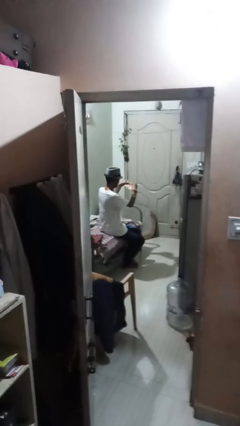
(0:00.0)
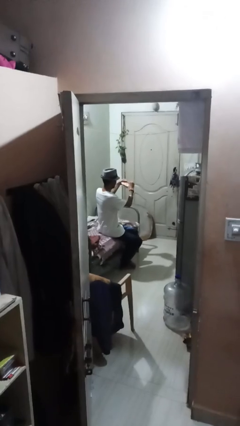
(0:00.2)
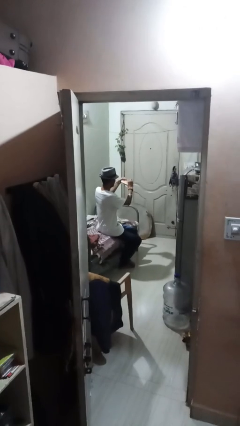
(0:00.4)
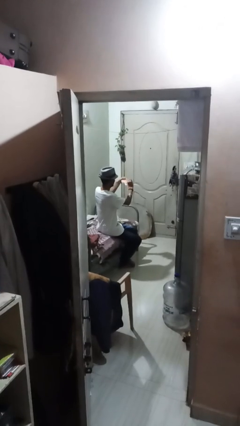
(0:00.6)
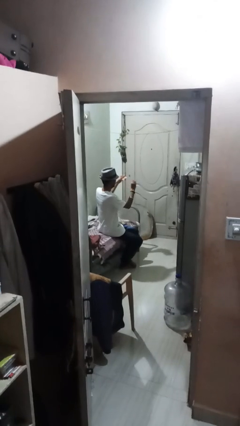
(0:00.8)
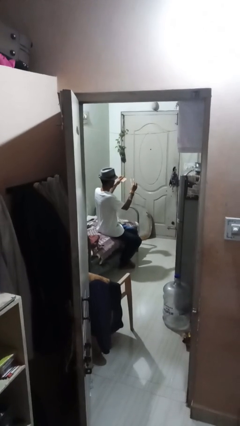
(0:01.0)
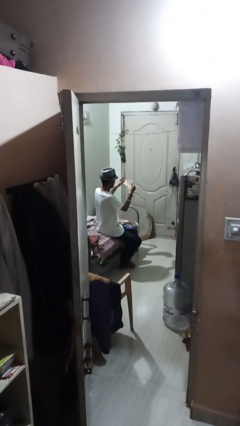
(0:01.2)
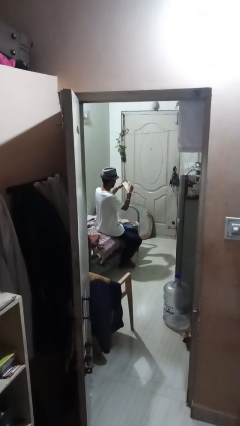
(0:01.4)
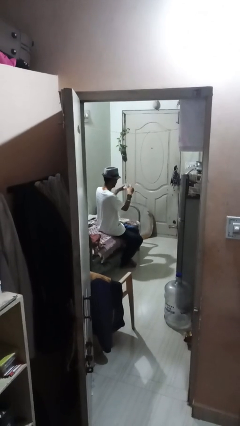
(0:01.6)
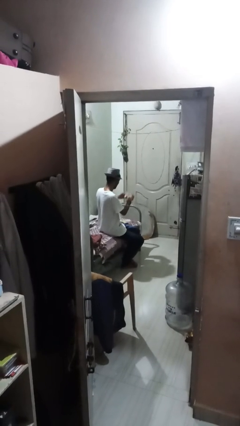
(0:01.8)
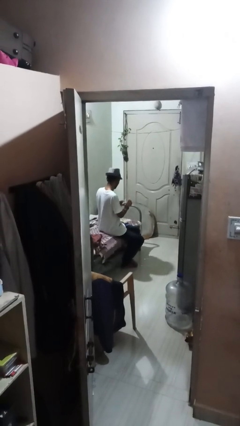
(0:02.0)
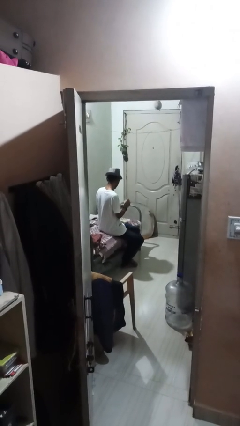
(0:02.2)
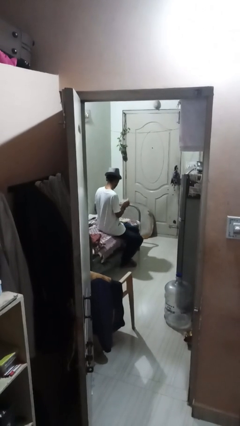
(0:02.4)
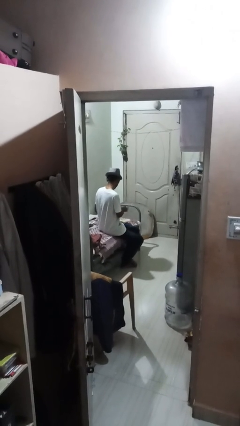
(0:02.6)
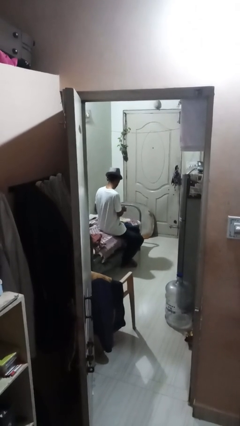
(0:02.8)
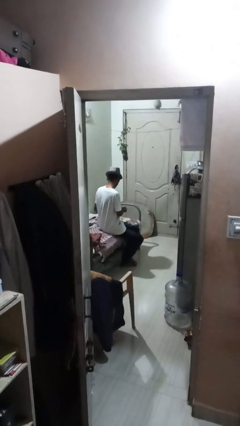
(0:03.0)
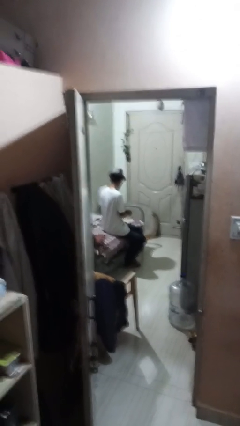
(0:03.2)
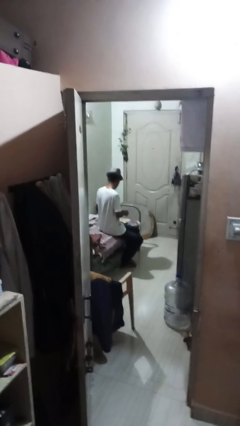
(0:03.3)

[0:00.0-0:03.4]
person tears paper

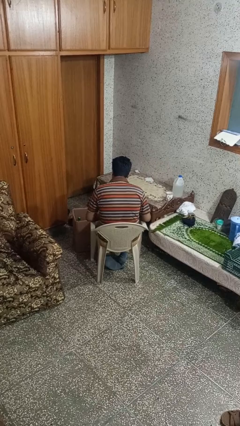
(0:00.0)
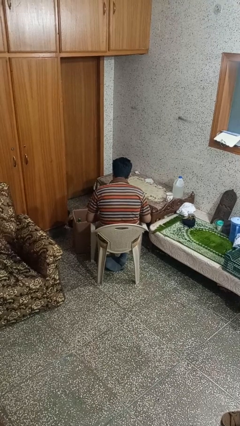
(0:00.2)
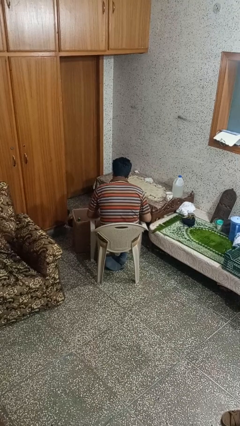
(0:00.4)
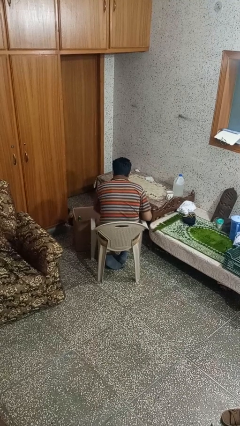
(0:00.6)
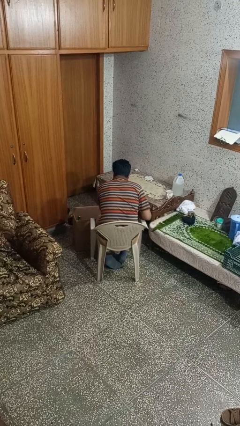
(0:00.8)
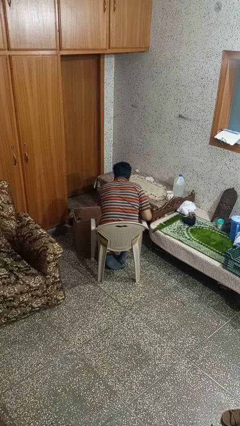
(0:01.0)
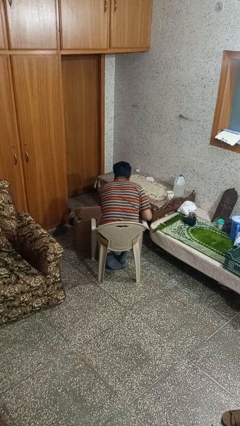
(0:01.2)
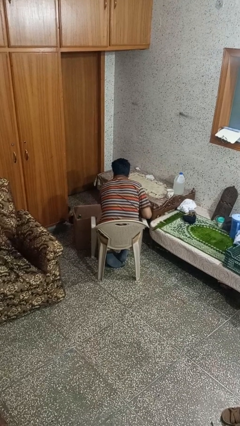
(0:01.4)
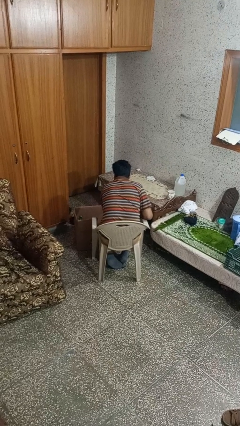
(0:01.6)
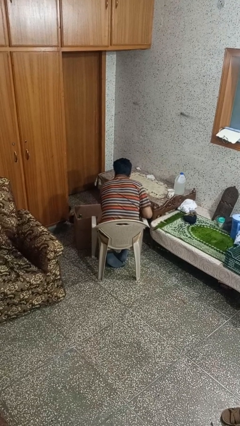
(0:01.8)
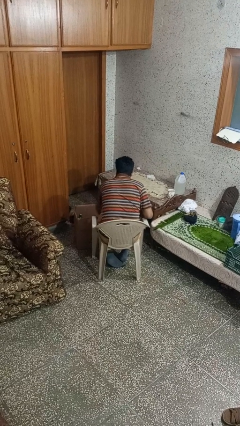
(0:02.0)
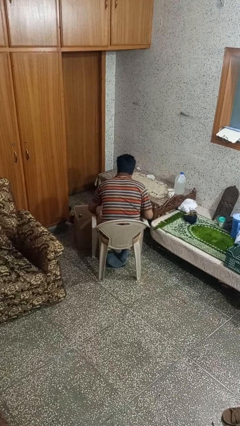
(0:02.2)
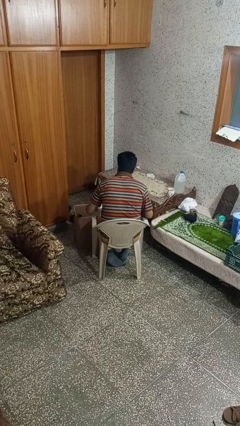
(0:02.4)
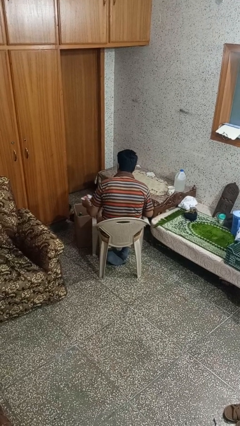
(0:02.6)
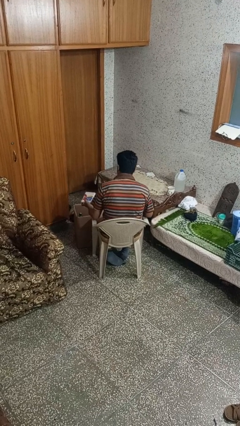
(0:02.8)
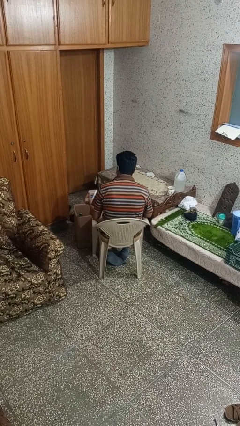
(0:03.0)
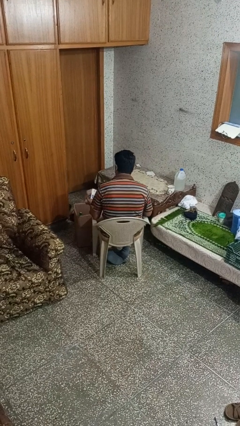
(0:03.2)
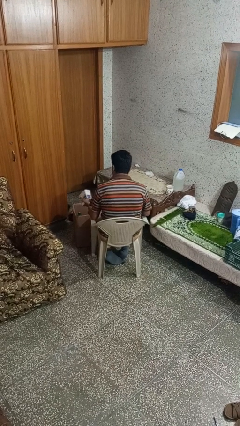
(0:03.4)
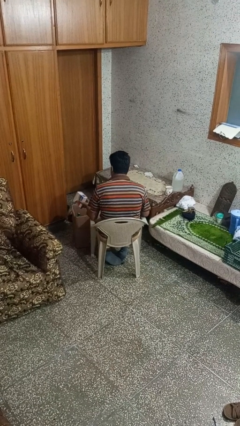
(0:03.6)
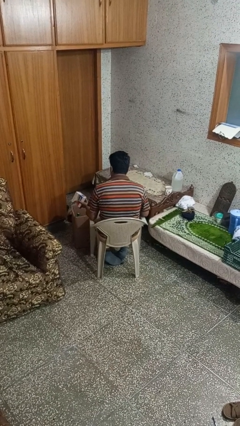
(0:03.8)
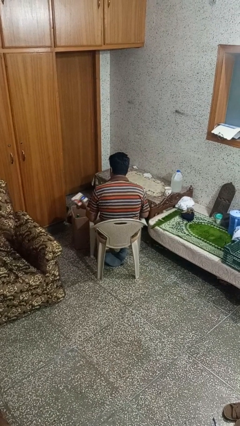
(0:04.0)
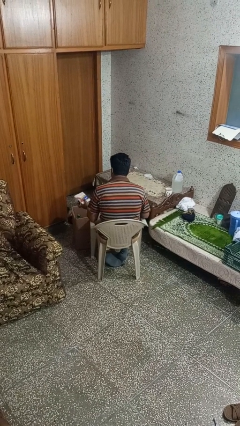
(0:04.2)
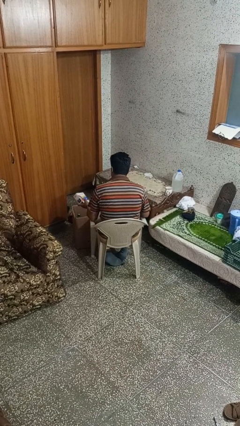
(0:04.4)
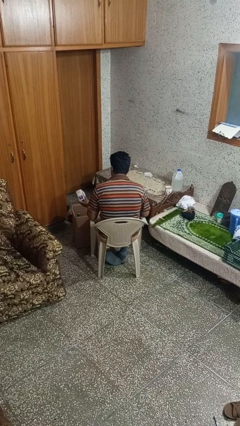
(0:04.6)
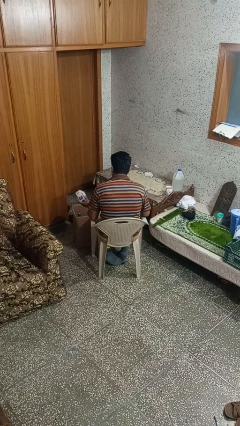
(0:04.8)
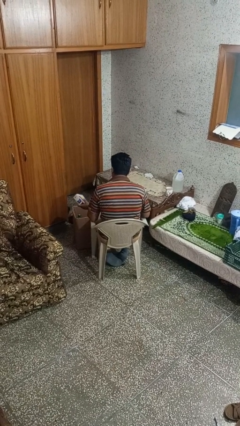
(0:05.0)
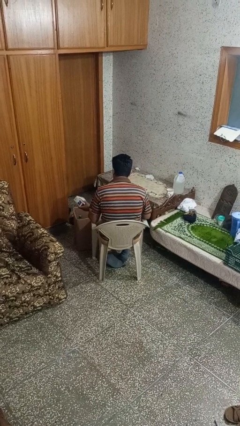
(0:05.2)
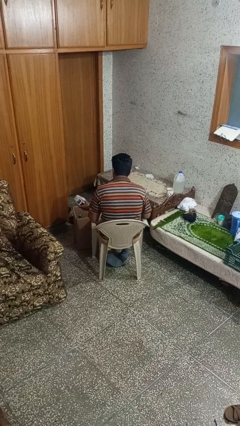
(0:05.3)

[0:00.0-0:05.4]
person takes object from box

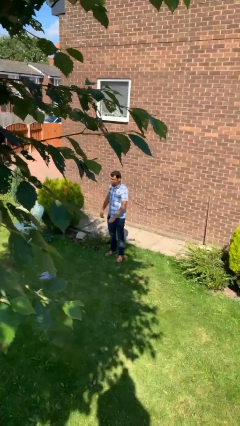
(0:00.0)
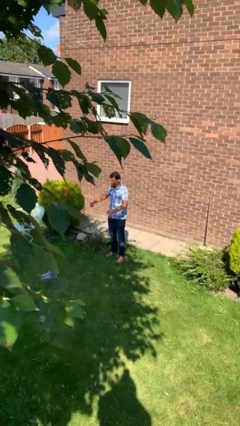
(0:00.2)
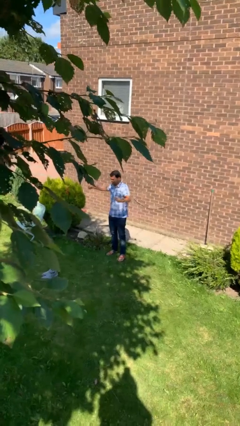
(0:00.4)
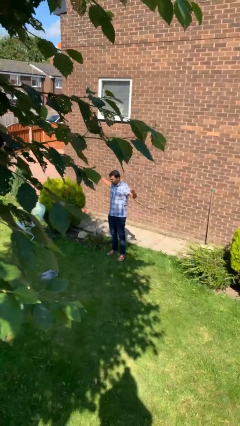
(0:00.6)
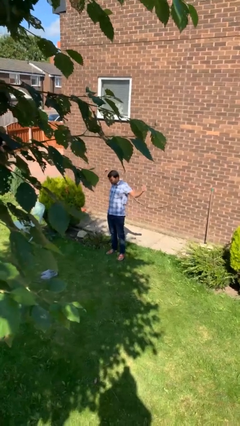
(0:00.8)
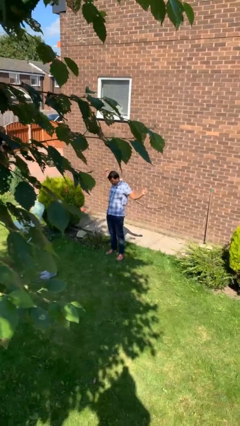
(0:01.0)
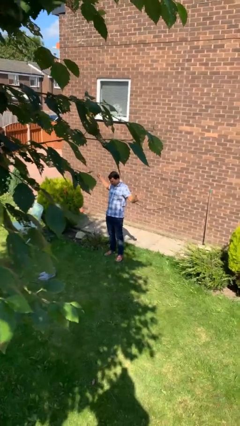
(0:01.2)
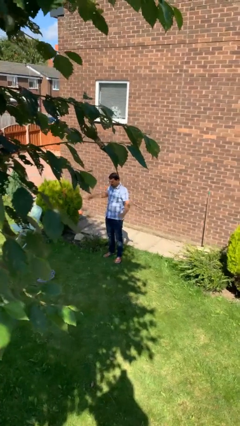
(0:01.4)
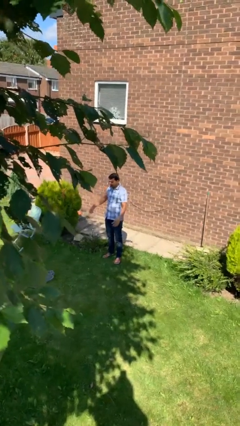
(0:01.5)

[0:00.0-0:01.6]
person stretches arms to side

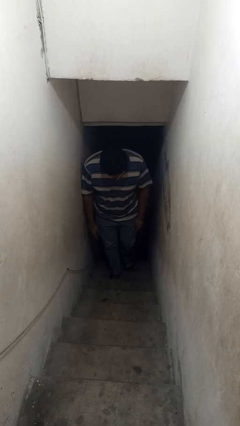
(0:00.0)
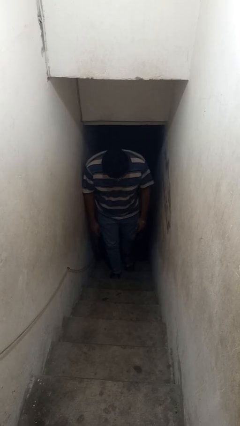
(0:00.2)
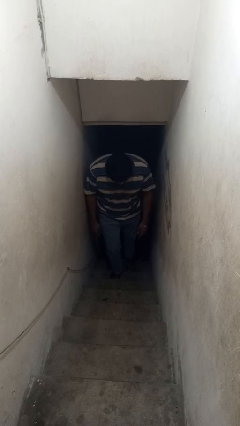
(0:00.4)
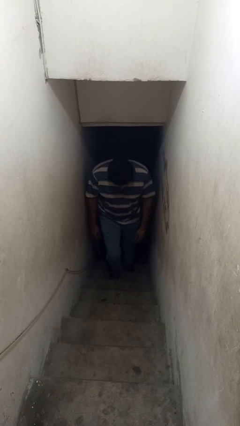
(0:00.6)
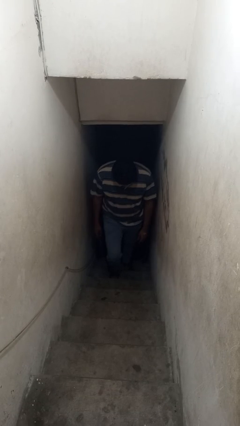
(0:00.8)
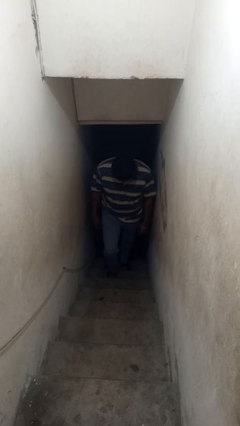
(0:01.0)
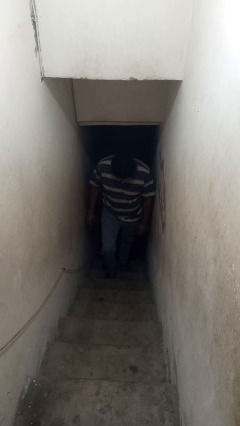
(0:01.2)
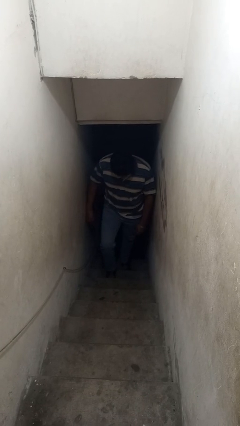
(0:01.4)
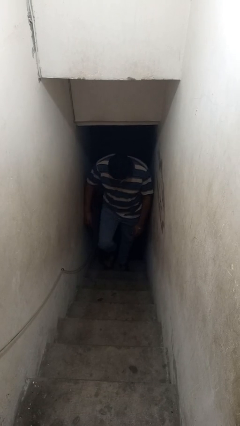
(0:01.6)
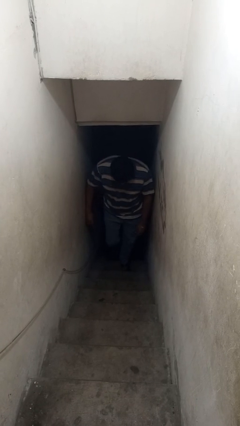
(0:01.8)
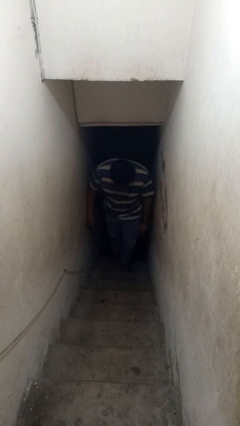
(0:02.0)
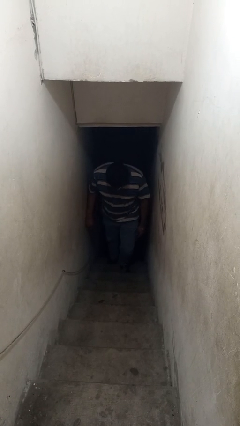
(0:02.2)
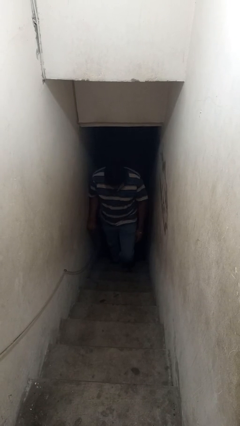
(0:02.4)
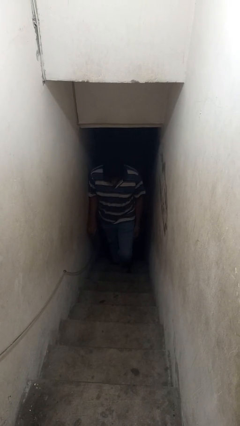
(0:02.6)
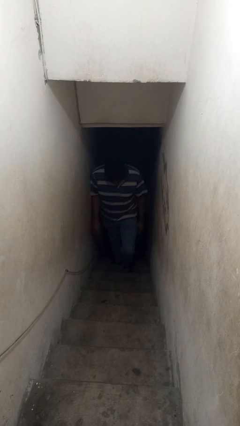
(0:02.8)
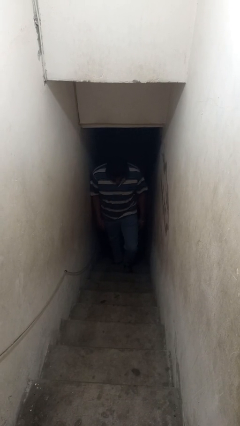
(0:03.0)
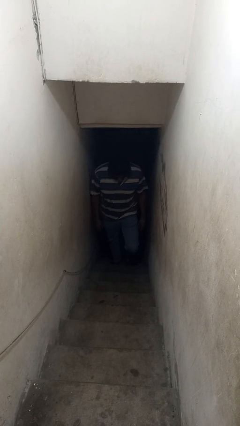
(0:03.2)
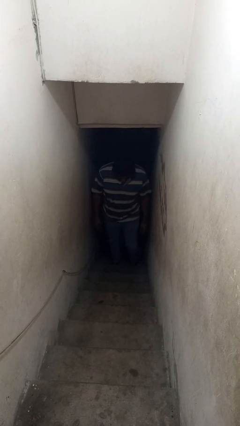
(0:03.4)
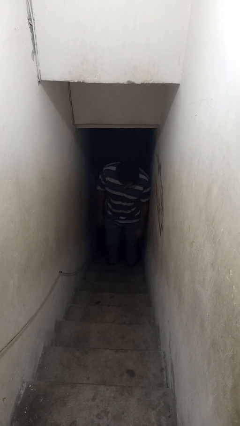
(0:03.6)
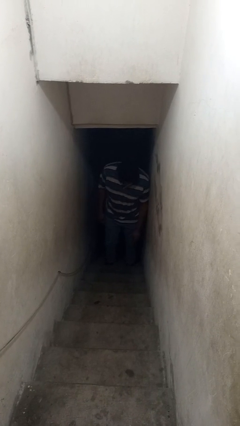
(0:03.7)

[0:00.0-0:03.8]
person climbs down stairs

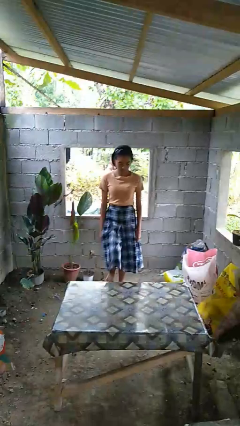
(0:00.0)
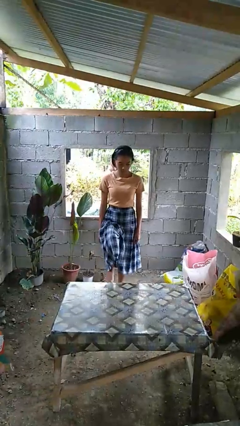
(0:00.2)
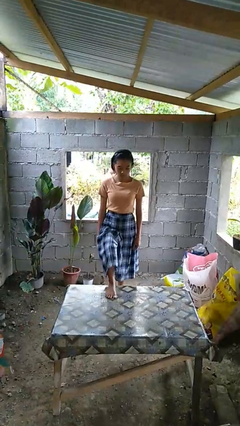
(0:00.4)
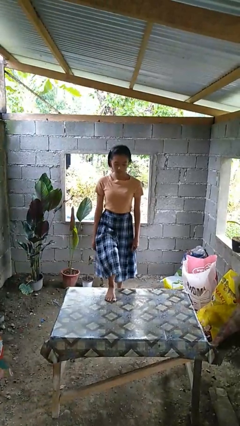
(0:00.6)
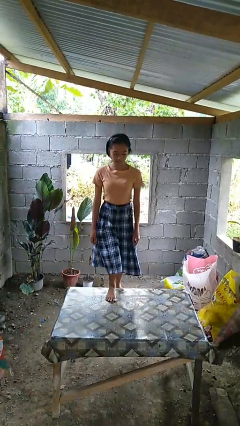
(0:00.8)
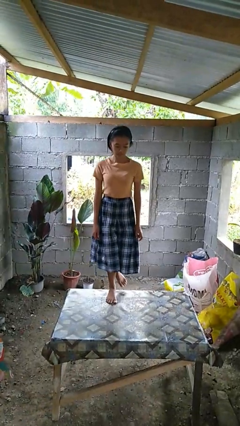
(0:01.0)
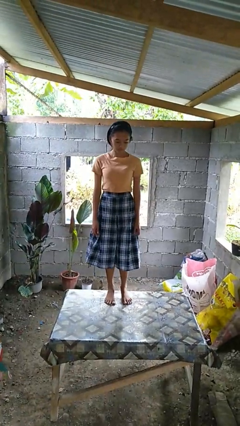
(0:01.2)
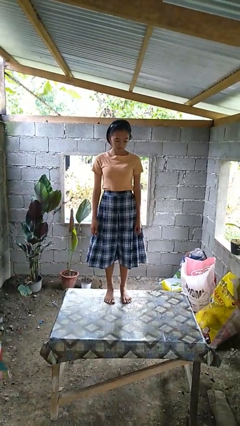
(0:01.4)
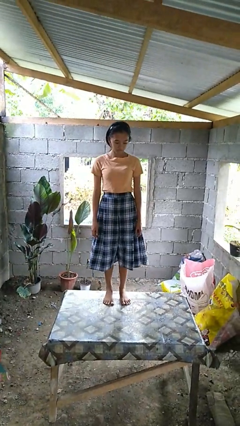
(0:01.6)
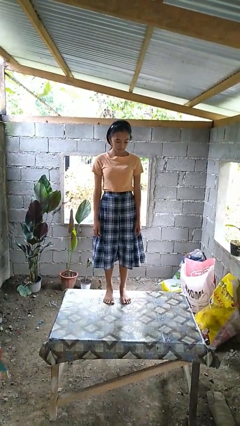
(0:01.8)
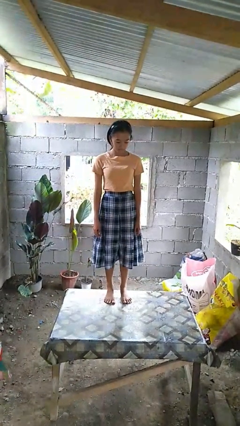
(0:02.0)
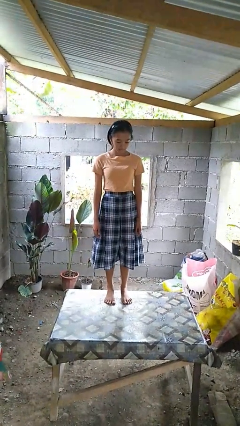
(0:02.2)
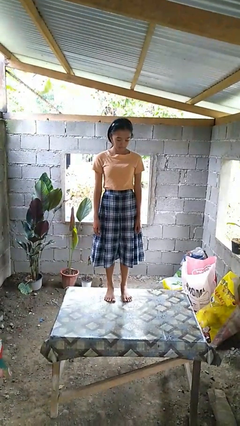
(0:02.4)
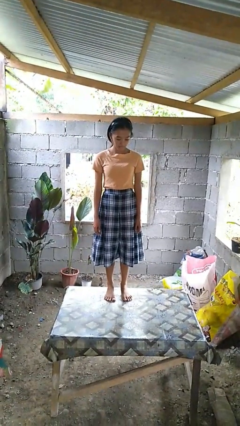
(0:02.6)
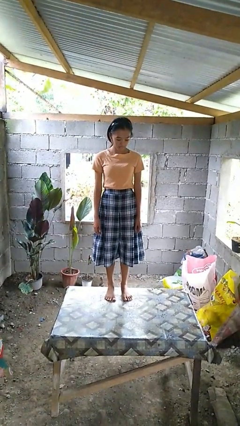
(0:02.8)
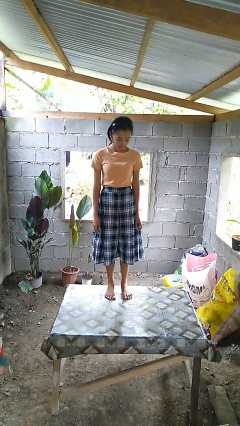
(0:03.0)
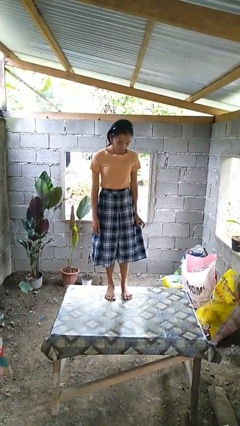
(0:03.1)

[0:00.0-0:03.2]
person climbs on table
